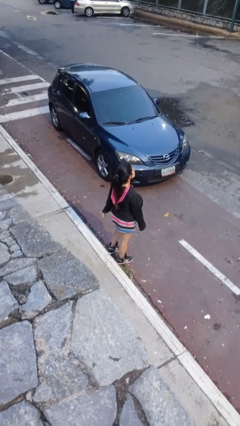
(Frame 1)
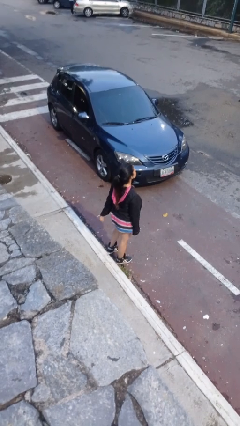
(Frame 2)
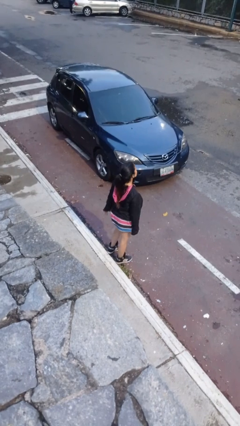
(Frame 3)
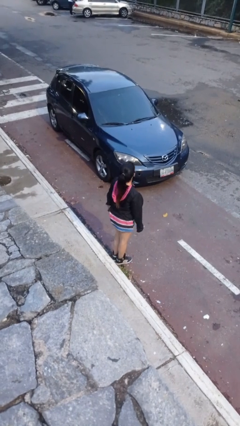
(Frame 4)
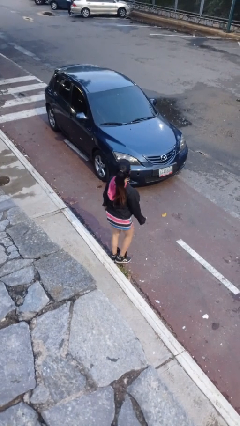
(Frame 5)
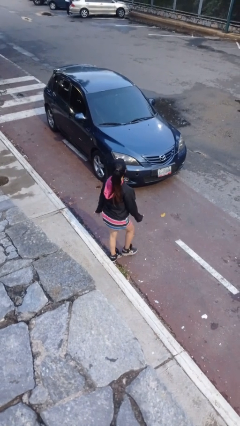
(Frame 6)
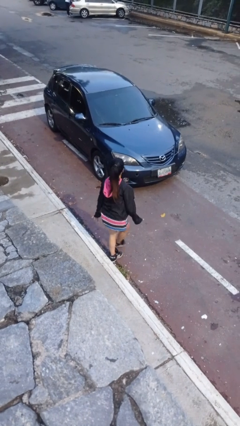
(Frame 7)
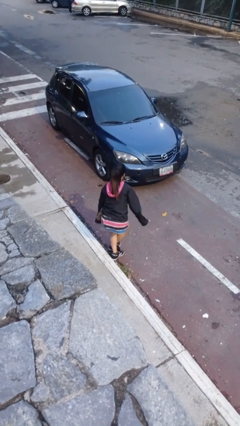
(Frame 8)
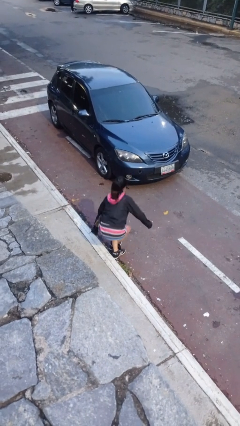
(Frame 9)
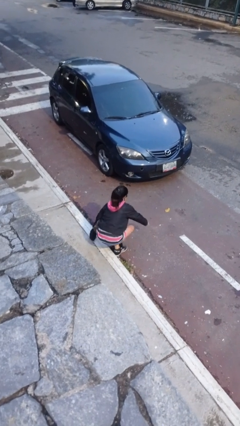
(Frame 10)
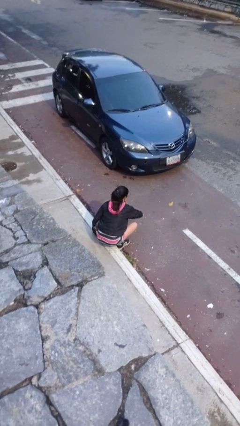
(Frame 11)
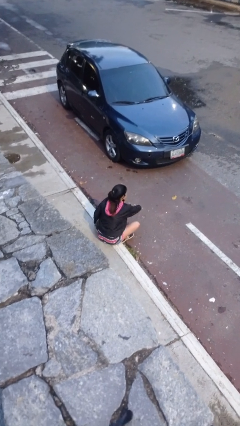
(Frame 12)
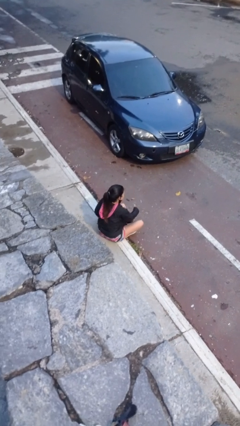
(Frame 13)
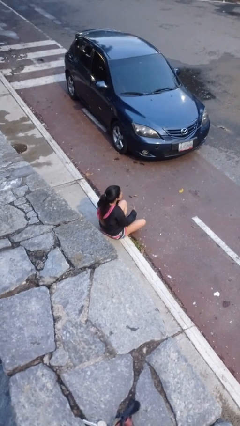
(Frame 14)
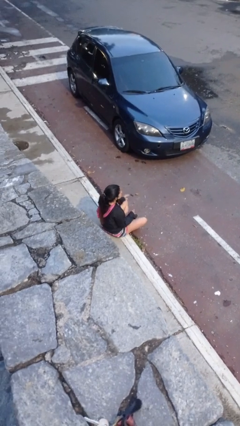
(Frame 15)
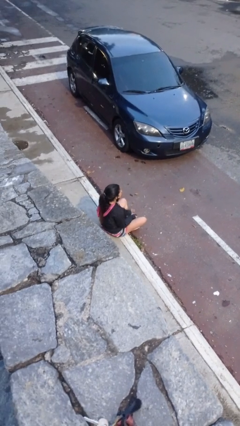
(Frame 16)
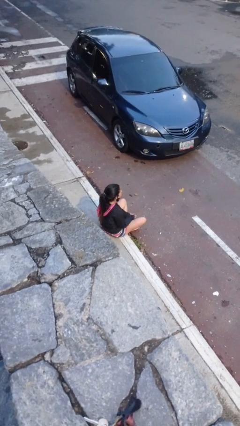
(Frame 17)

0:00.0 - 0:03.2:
person sits crisscross

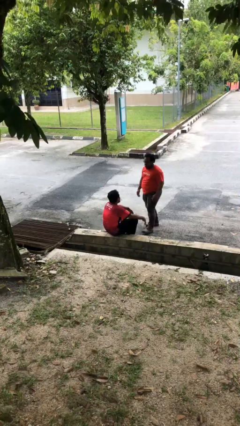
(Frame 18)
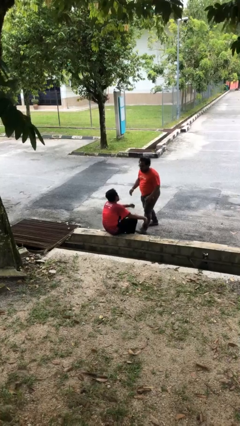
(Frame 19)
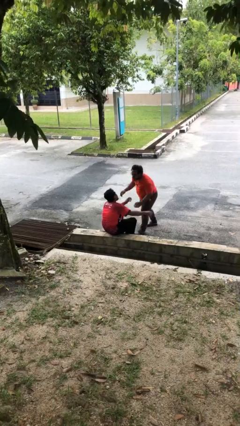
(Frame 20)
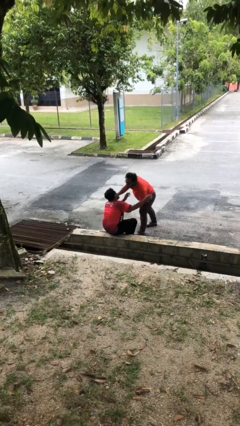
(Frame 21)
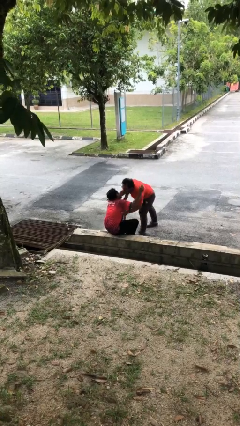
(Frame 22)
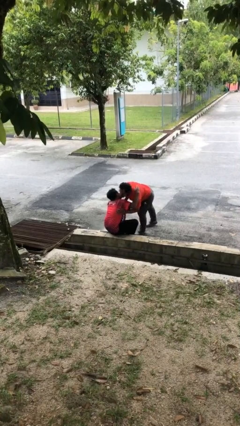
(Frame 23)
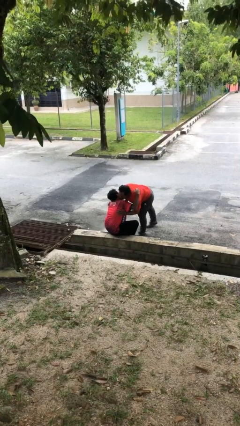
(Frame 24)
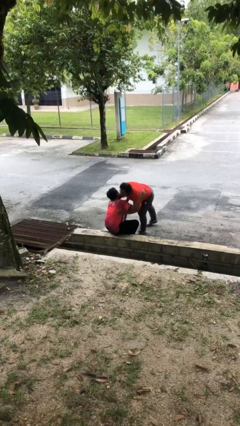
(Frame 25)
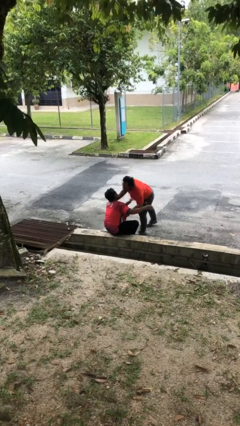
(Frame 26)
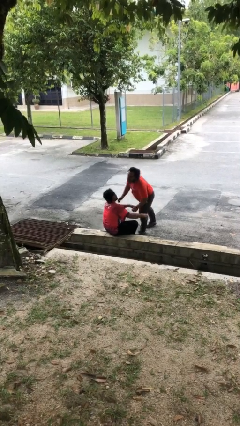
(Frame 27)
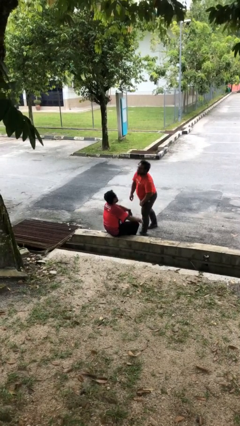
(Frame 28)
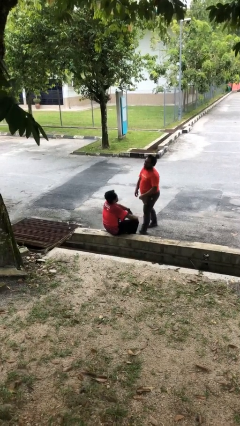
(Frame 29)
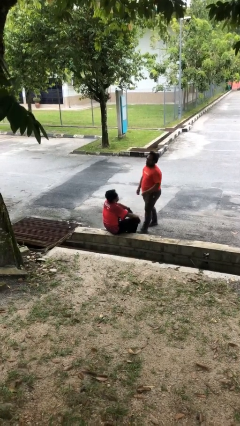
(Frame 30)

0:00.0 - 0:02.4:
person embraces person

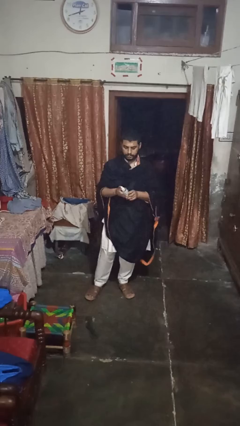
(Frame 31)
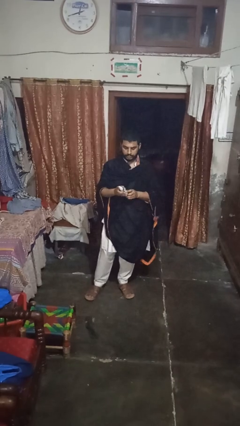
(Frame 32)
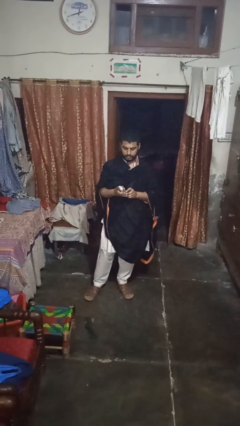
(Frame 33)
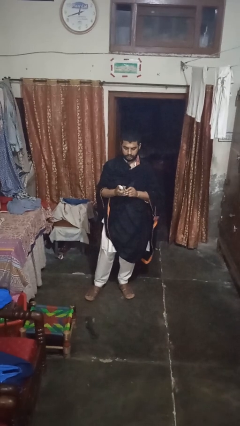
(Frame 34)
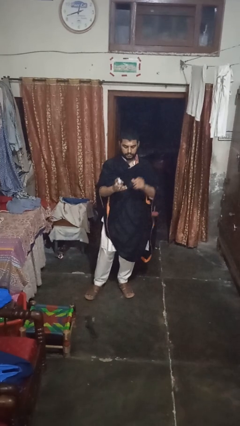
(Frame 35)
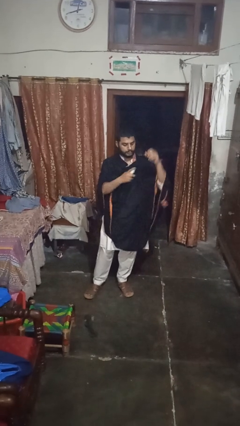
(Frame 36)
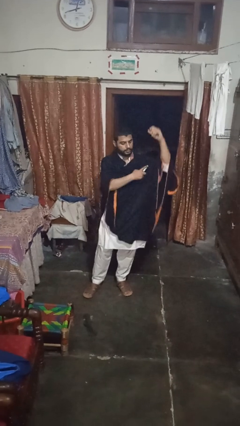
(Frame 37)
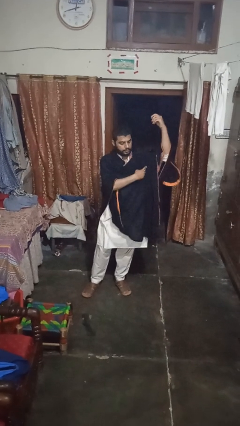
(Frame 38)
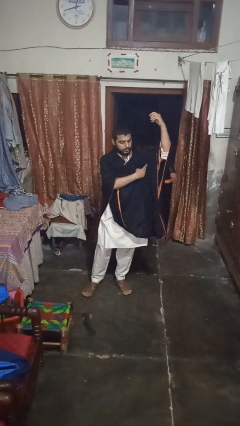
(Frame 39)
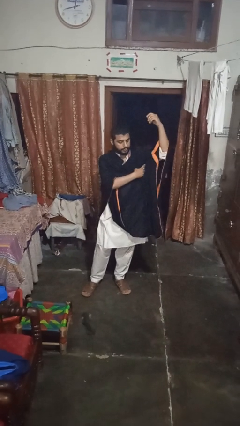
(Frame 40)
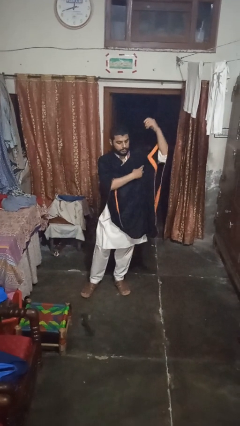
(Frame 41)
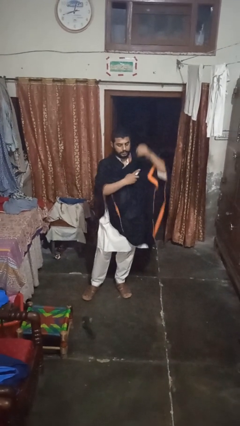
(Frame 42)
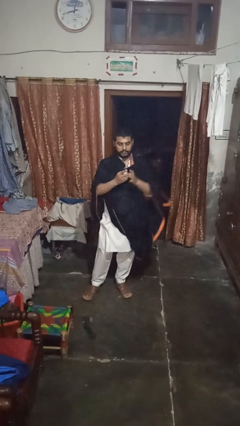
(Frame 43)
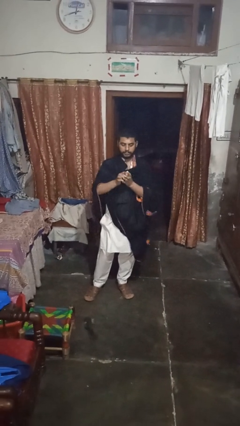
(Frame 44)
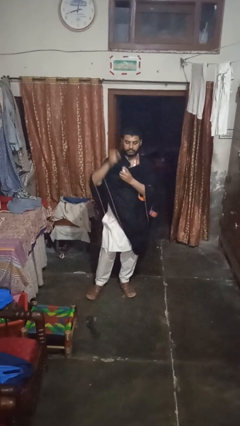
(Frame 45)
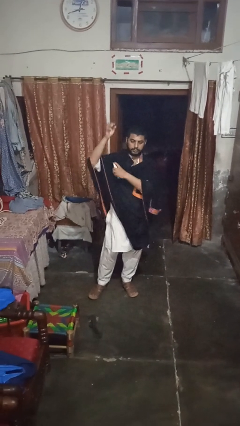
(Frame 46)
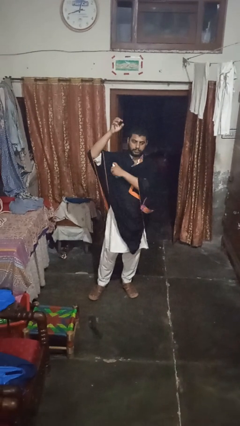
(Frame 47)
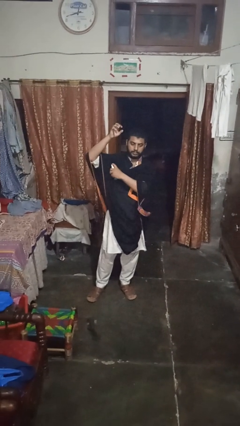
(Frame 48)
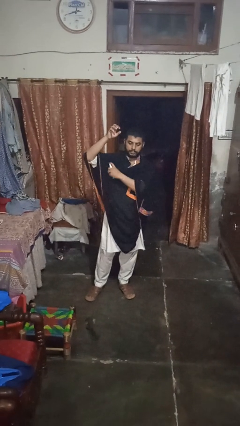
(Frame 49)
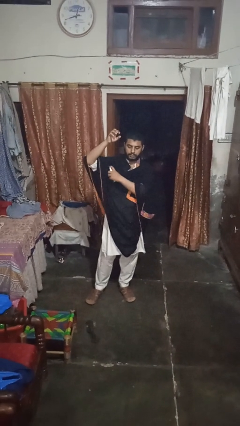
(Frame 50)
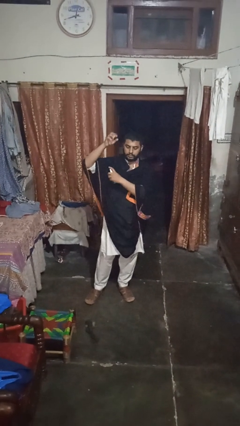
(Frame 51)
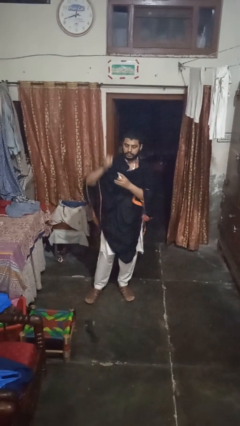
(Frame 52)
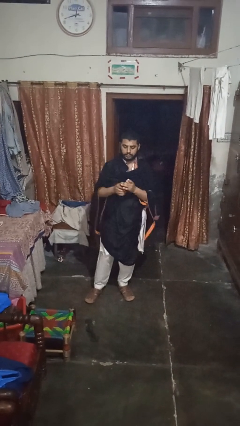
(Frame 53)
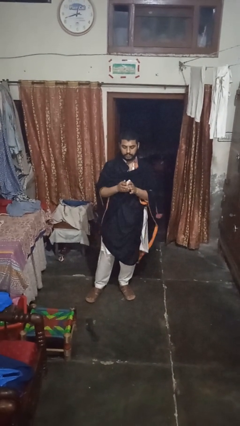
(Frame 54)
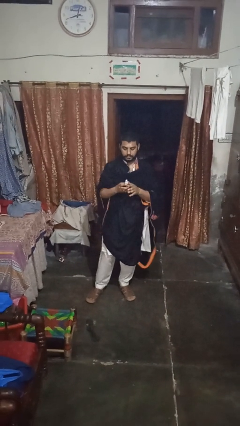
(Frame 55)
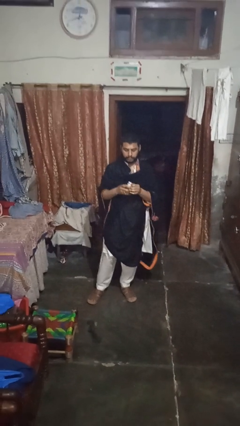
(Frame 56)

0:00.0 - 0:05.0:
person applies deodorant

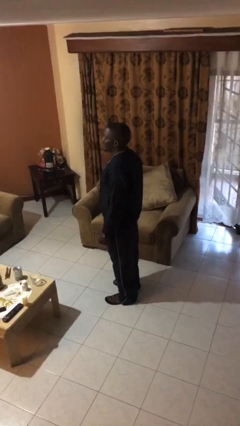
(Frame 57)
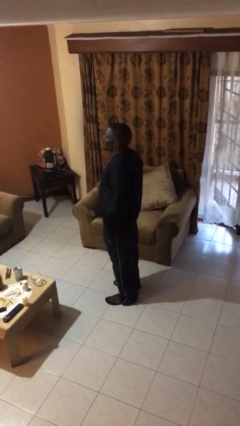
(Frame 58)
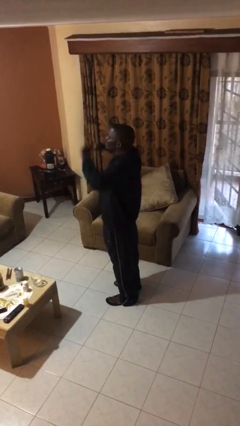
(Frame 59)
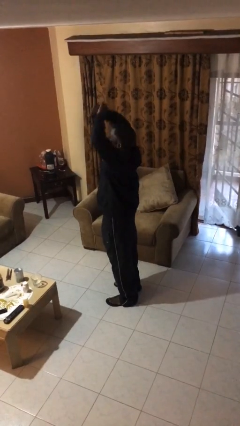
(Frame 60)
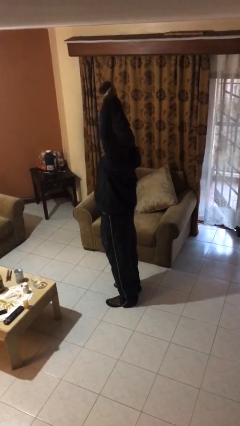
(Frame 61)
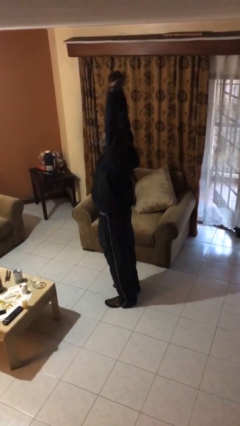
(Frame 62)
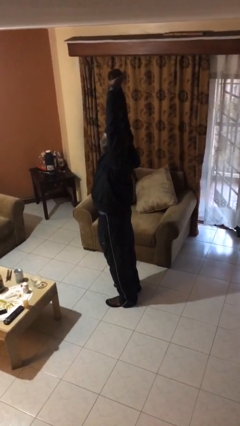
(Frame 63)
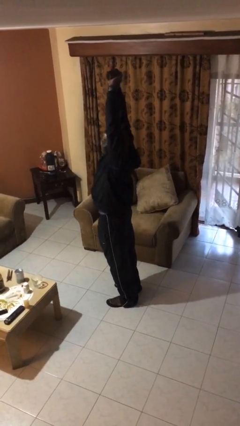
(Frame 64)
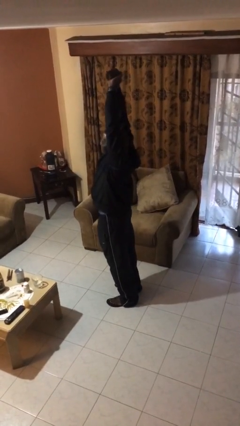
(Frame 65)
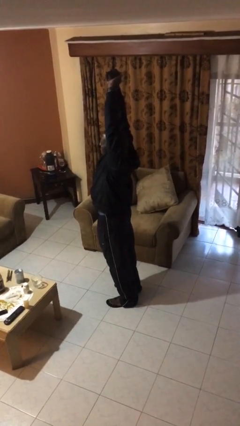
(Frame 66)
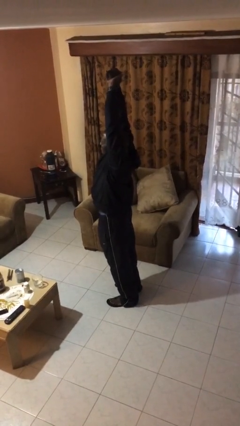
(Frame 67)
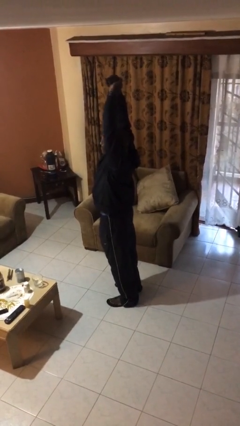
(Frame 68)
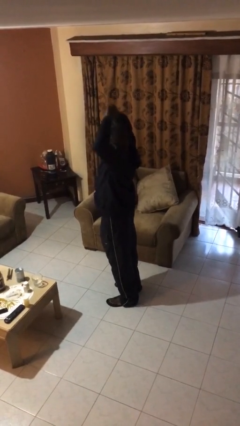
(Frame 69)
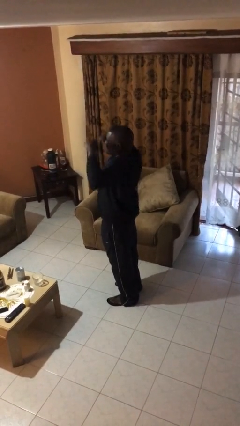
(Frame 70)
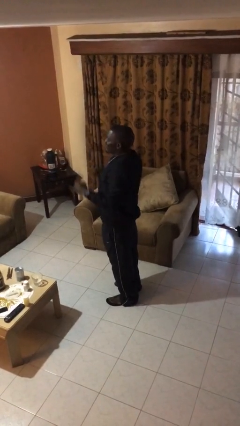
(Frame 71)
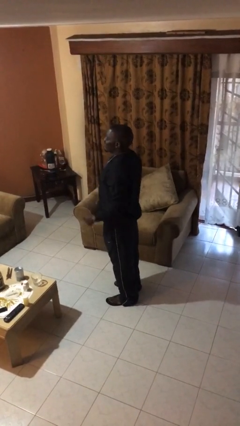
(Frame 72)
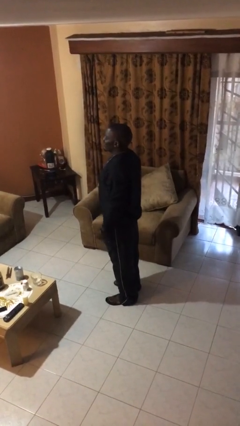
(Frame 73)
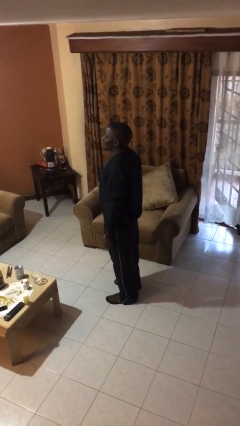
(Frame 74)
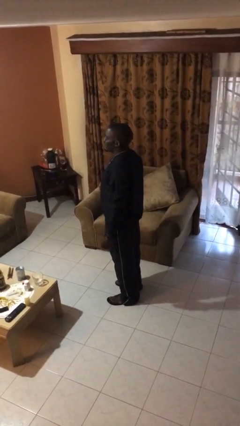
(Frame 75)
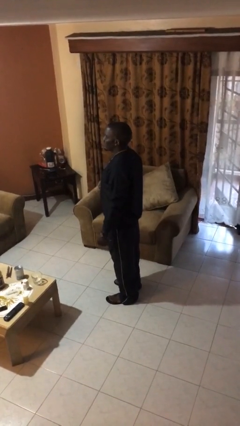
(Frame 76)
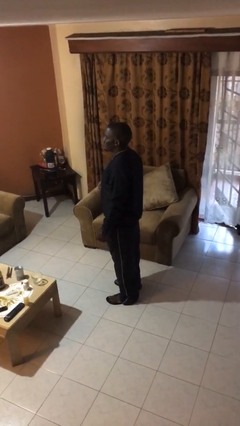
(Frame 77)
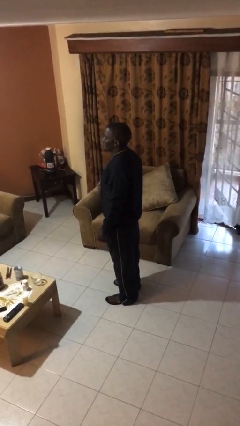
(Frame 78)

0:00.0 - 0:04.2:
person stretches arms over head

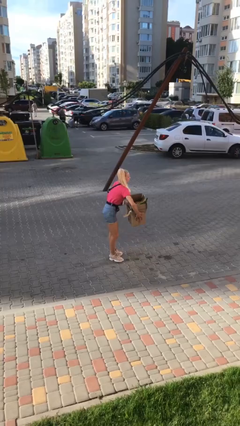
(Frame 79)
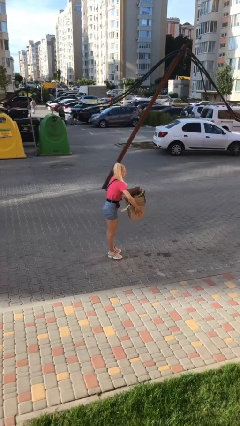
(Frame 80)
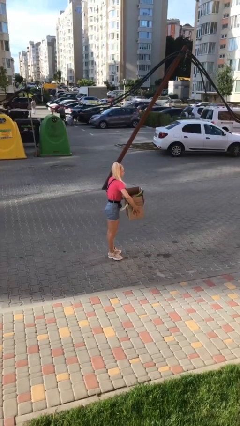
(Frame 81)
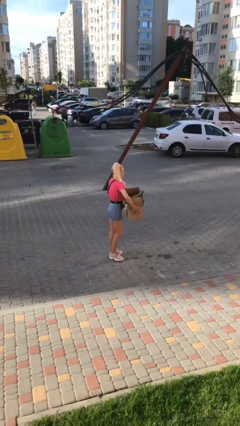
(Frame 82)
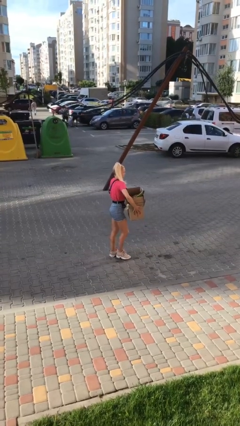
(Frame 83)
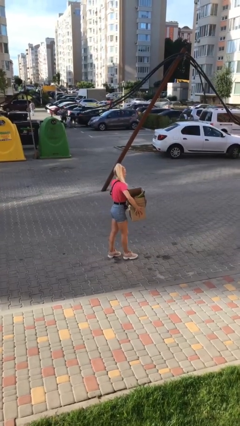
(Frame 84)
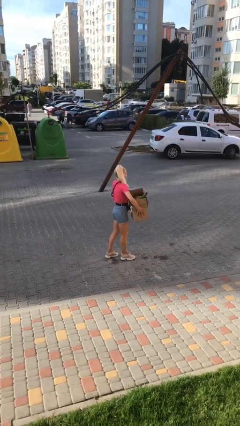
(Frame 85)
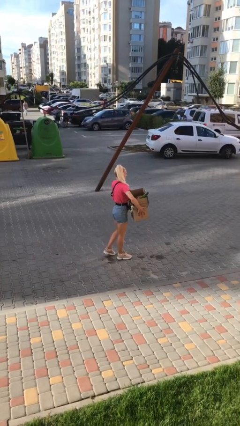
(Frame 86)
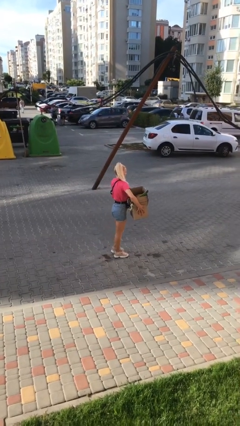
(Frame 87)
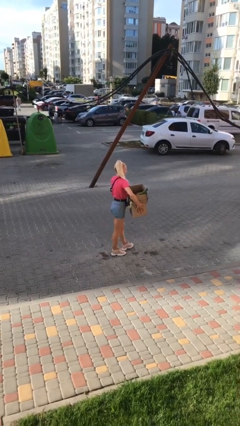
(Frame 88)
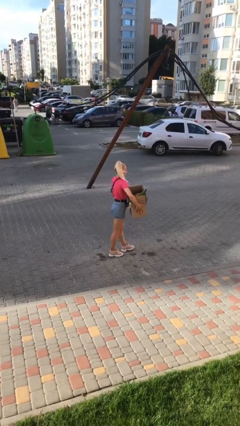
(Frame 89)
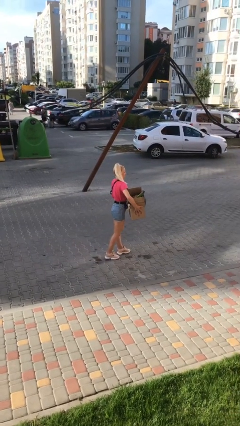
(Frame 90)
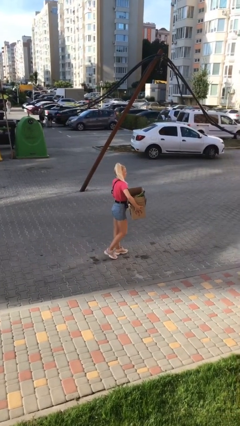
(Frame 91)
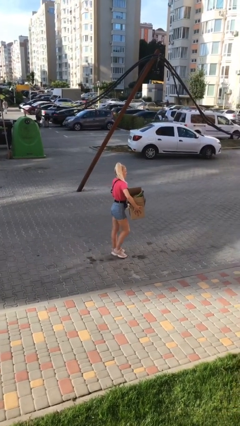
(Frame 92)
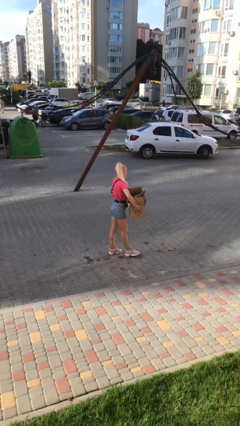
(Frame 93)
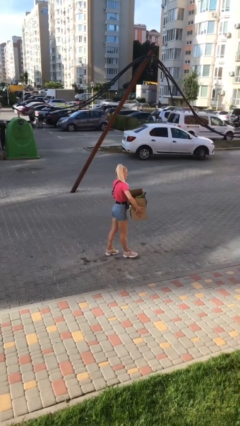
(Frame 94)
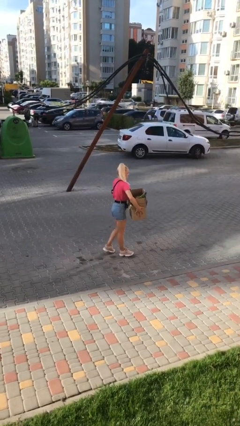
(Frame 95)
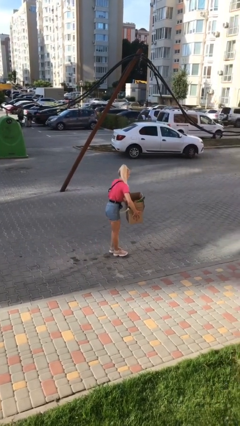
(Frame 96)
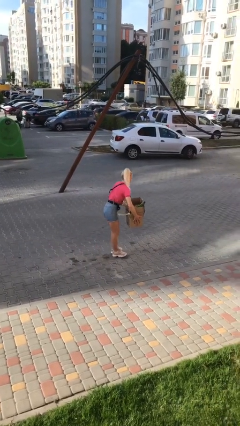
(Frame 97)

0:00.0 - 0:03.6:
person carries heavy object
